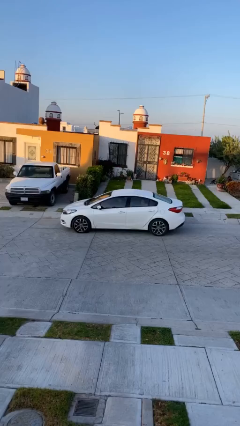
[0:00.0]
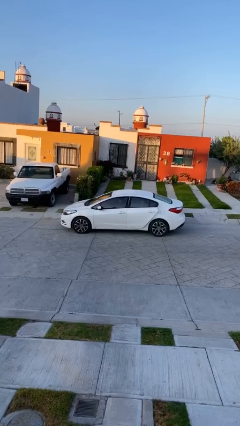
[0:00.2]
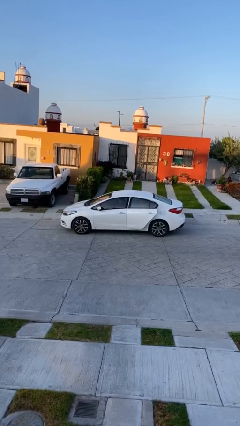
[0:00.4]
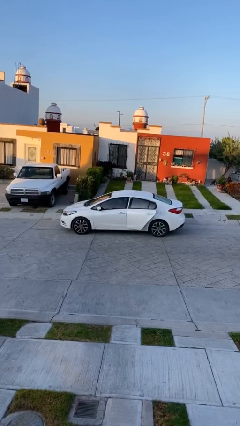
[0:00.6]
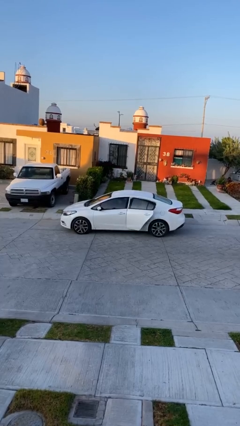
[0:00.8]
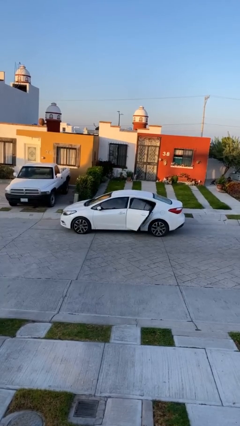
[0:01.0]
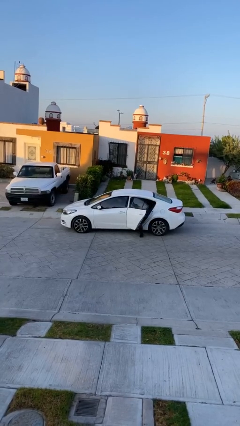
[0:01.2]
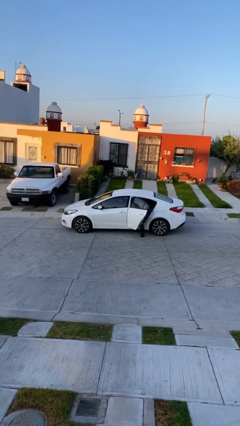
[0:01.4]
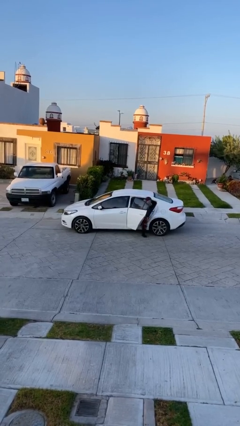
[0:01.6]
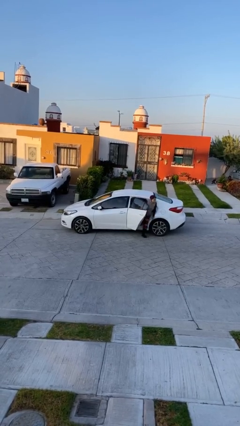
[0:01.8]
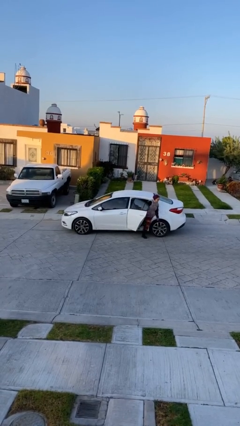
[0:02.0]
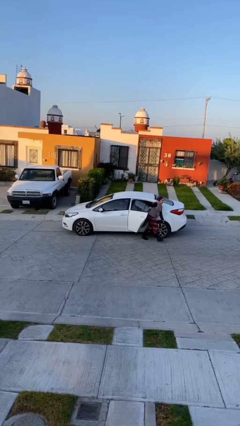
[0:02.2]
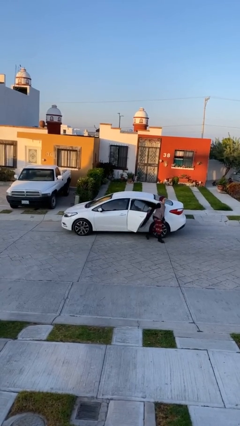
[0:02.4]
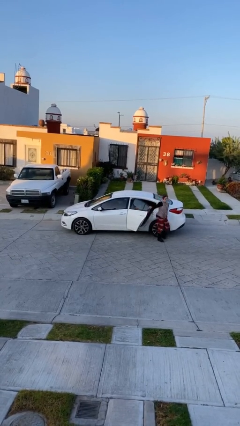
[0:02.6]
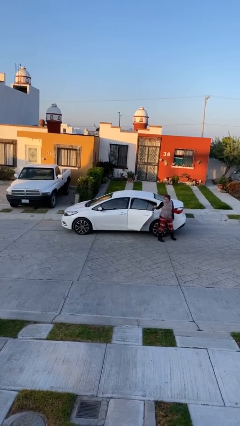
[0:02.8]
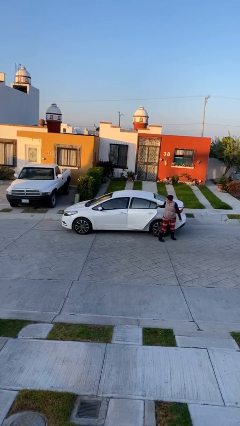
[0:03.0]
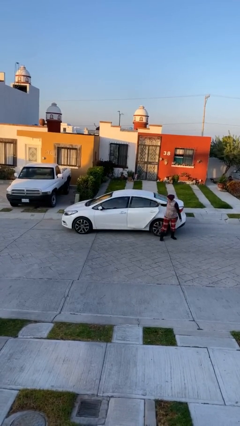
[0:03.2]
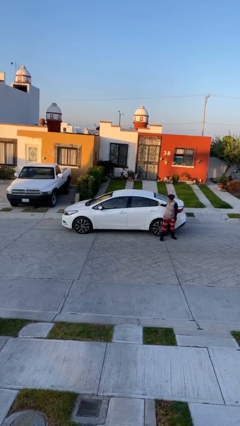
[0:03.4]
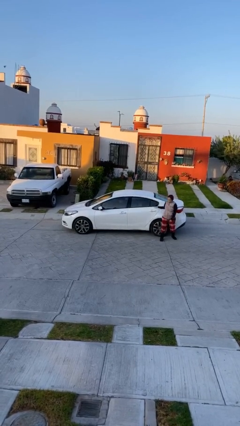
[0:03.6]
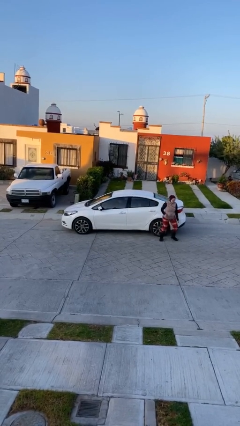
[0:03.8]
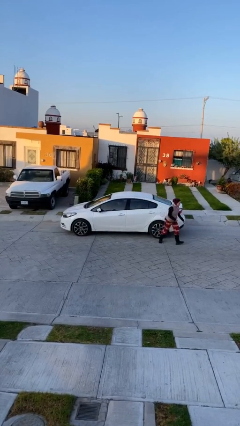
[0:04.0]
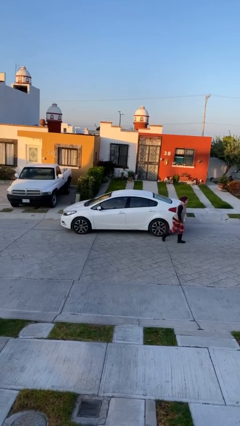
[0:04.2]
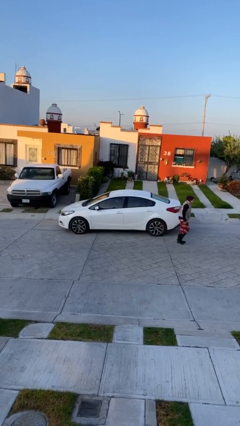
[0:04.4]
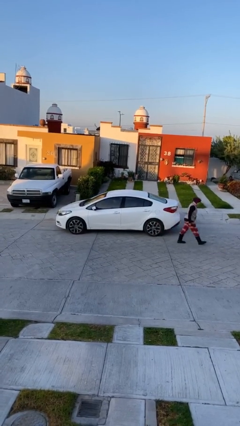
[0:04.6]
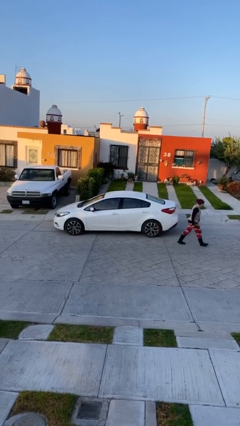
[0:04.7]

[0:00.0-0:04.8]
car drops off person

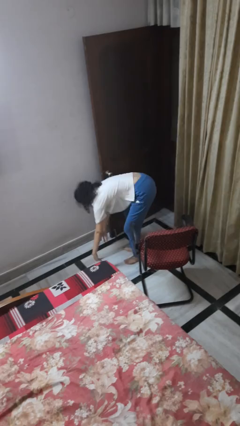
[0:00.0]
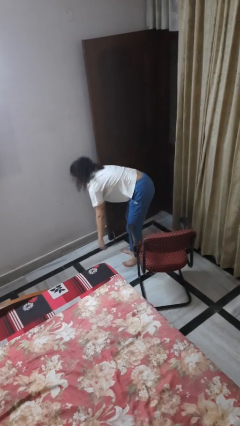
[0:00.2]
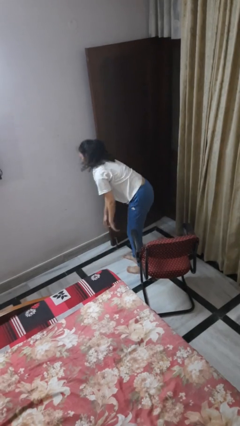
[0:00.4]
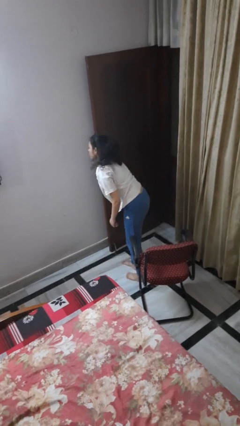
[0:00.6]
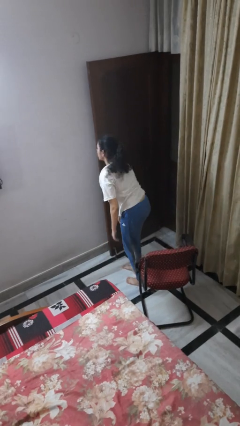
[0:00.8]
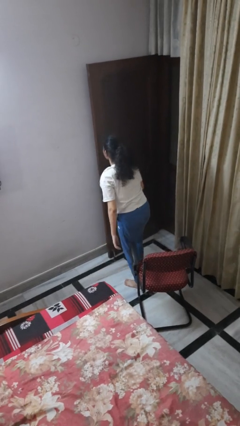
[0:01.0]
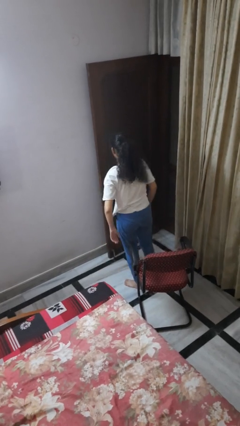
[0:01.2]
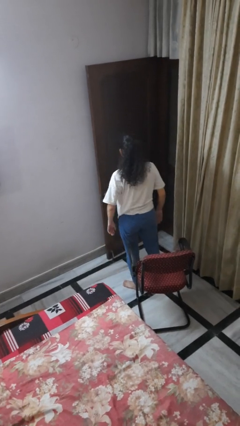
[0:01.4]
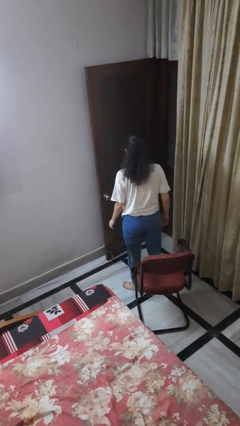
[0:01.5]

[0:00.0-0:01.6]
person stands up from floor

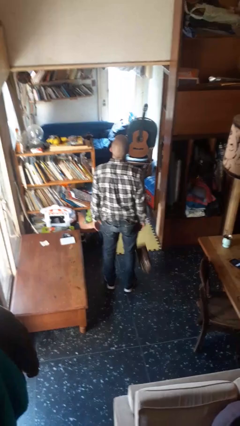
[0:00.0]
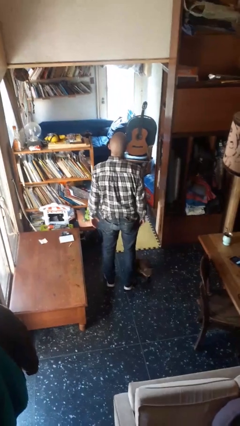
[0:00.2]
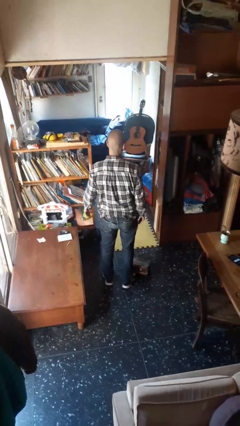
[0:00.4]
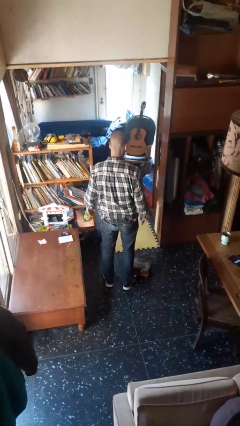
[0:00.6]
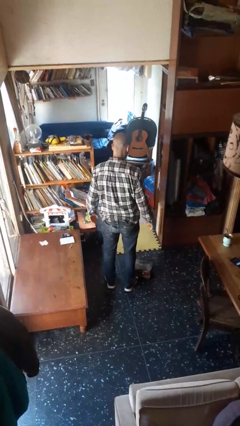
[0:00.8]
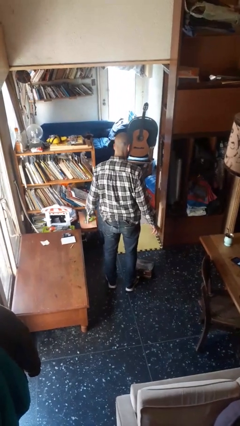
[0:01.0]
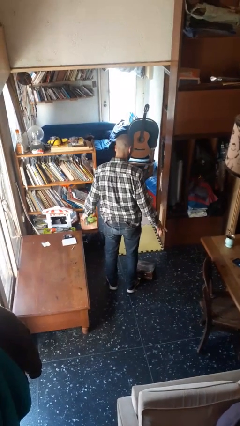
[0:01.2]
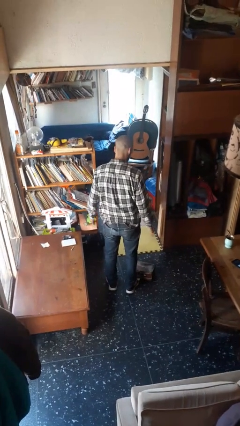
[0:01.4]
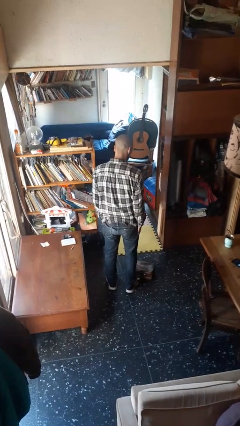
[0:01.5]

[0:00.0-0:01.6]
person drops object

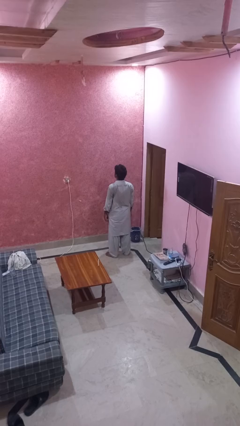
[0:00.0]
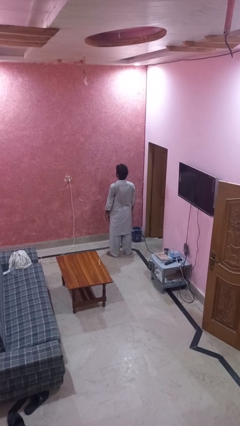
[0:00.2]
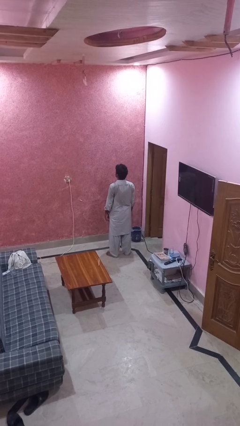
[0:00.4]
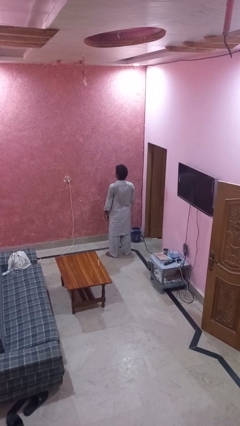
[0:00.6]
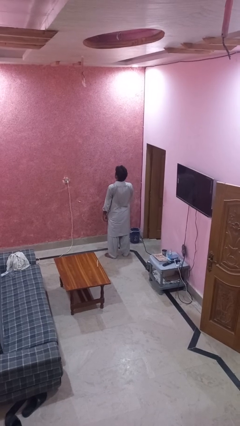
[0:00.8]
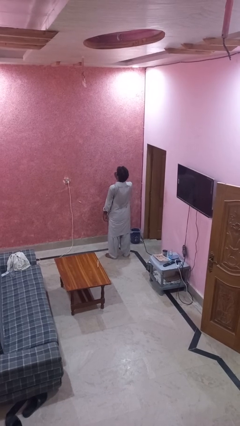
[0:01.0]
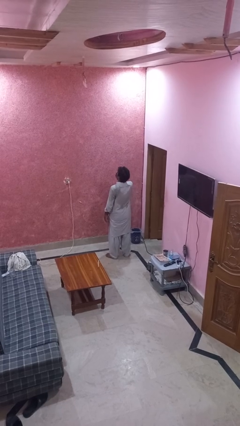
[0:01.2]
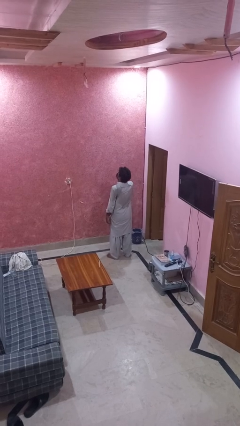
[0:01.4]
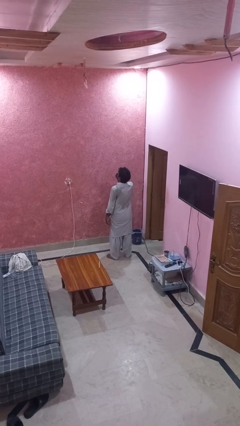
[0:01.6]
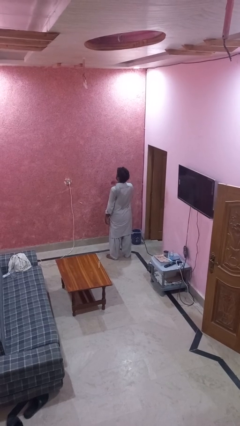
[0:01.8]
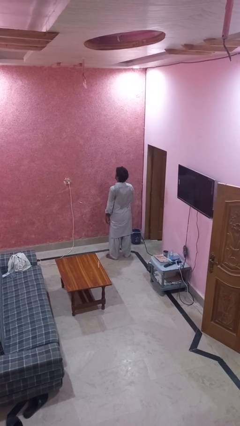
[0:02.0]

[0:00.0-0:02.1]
person yawns

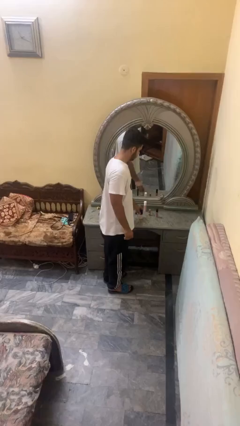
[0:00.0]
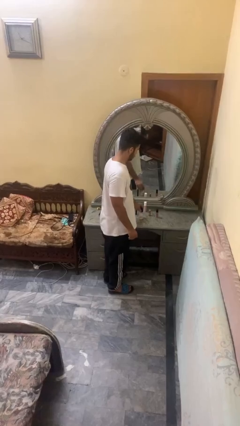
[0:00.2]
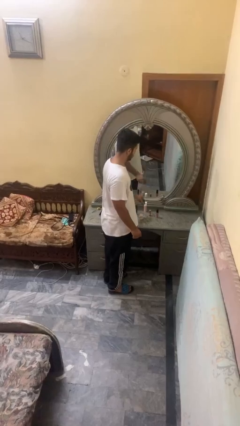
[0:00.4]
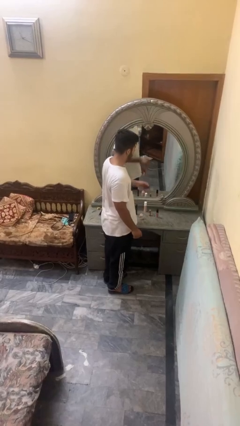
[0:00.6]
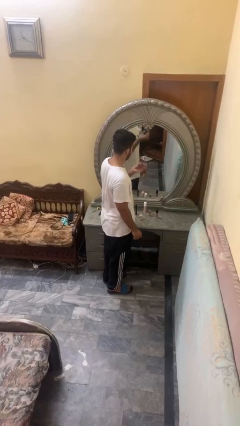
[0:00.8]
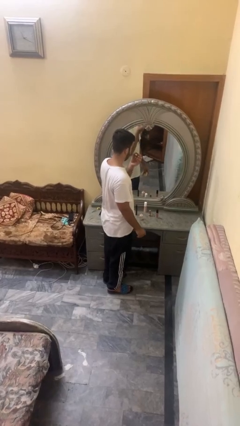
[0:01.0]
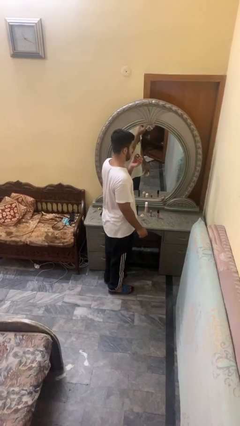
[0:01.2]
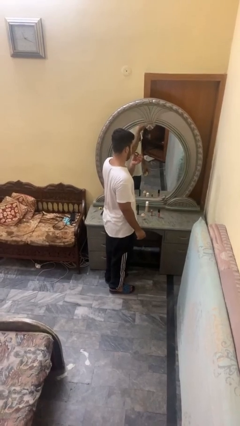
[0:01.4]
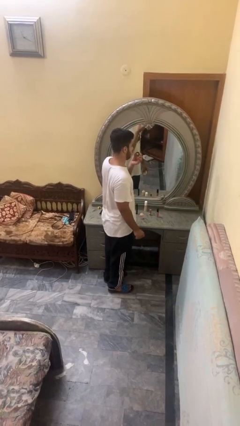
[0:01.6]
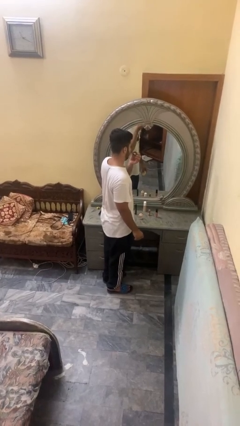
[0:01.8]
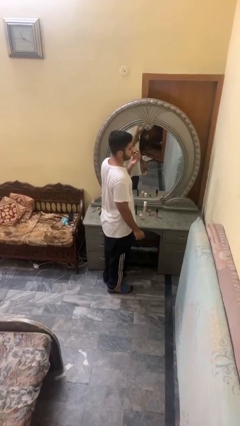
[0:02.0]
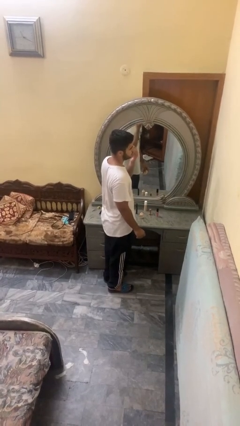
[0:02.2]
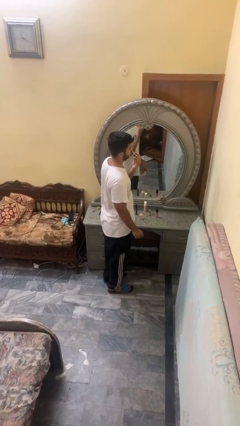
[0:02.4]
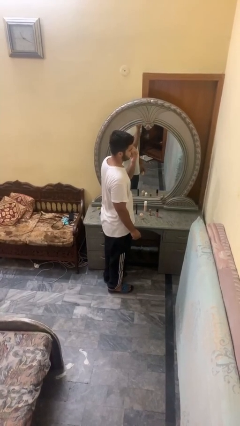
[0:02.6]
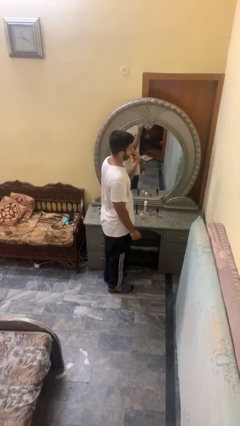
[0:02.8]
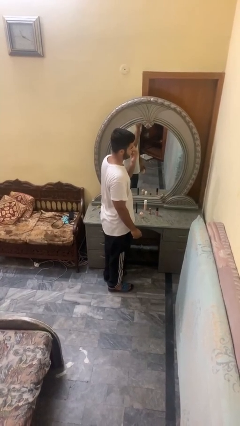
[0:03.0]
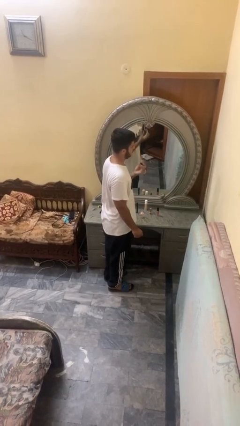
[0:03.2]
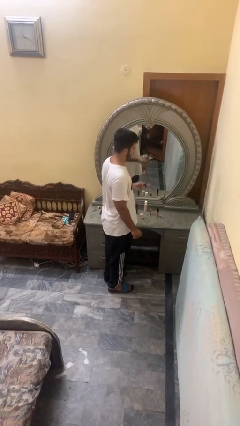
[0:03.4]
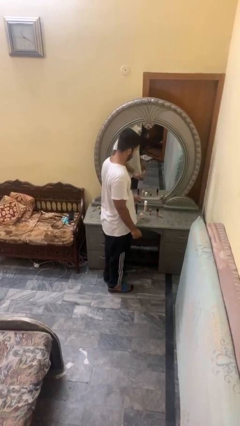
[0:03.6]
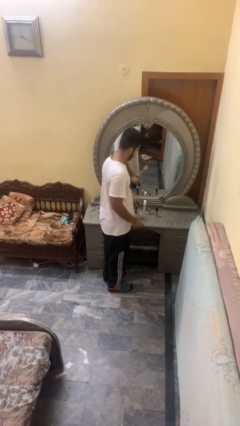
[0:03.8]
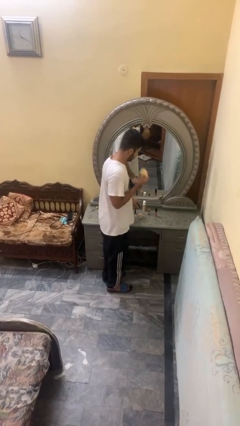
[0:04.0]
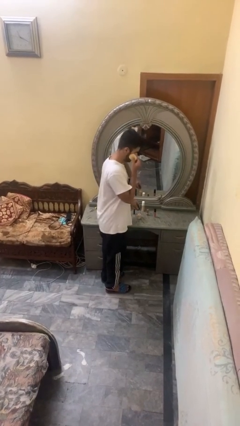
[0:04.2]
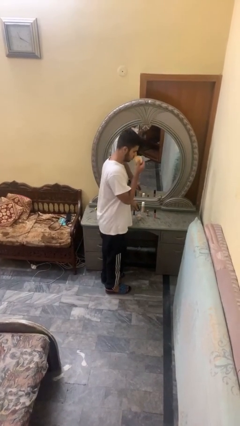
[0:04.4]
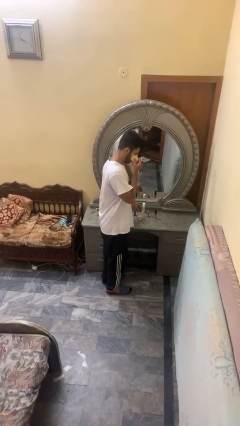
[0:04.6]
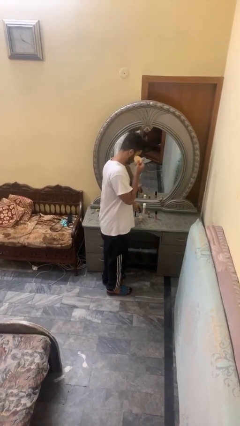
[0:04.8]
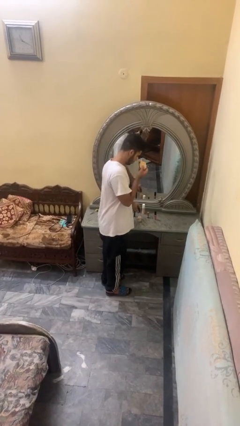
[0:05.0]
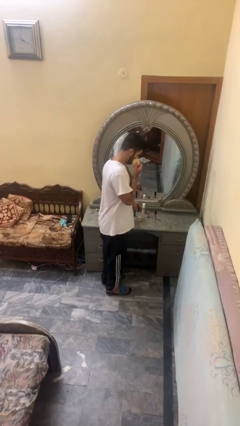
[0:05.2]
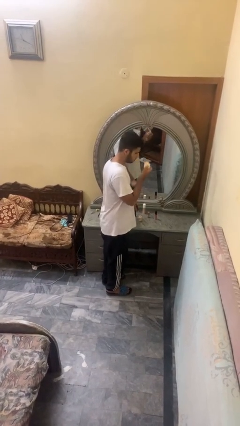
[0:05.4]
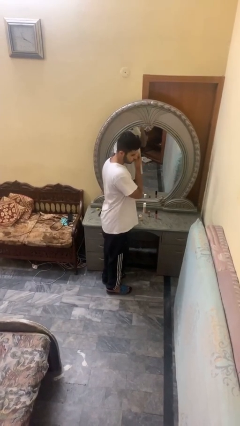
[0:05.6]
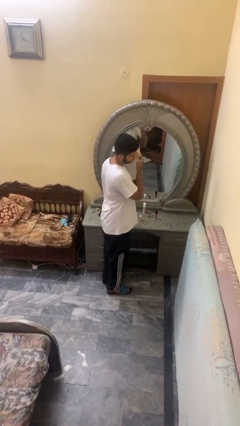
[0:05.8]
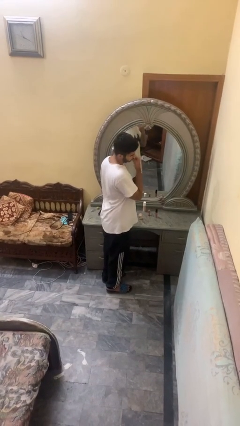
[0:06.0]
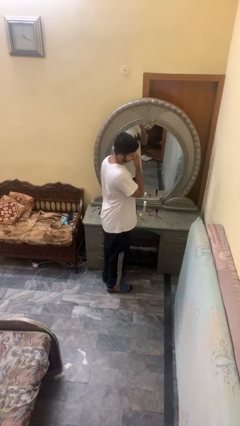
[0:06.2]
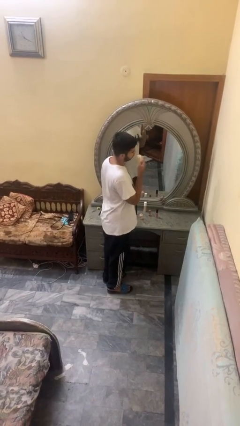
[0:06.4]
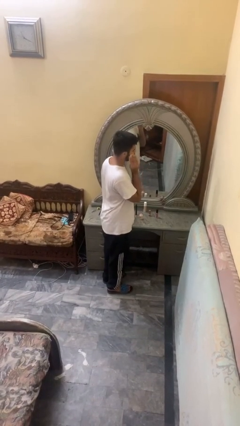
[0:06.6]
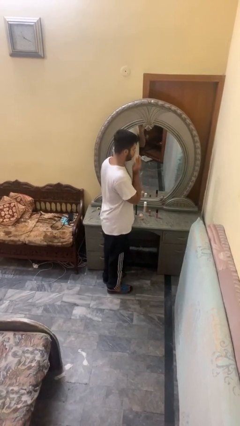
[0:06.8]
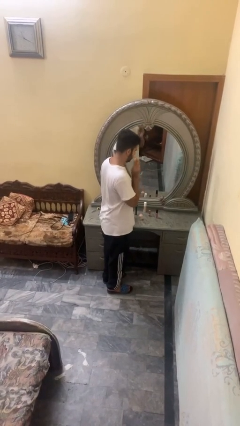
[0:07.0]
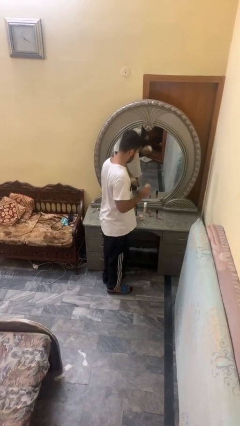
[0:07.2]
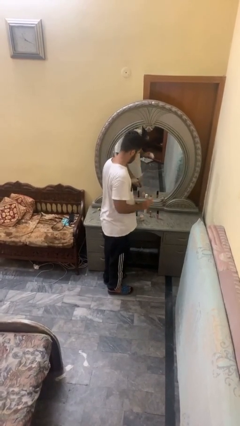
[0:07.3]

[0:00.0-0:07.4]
person applies foundation makeup
